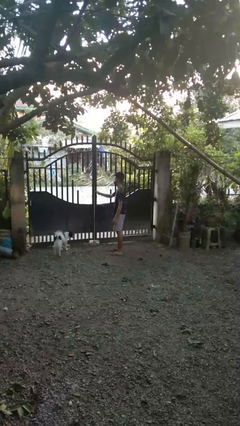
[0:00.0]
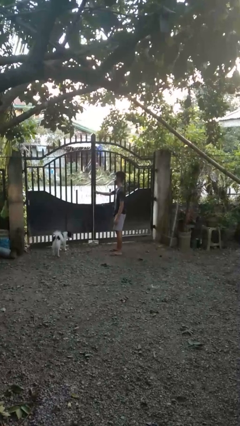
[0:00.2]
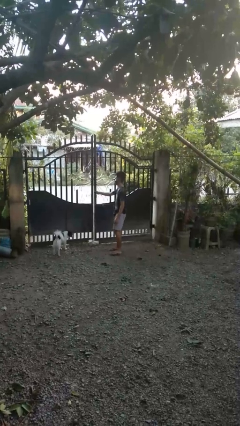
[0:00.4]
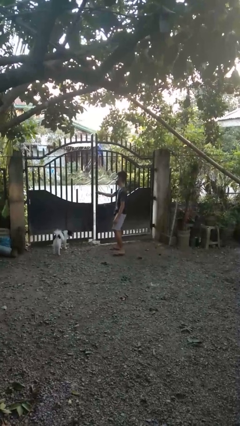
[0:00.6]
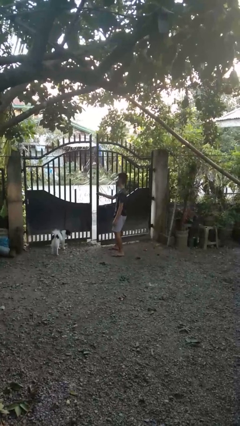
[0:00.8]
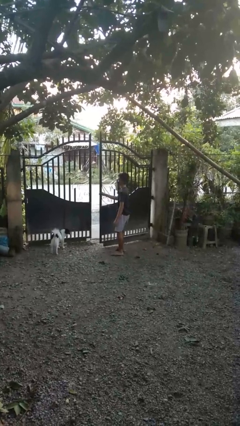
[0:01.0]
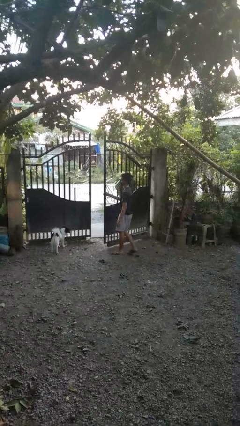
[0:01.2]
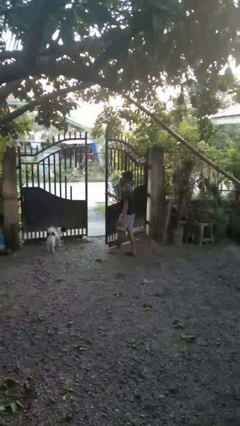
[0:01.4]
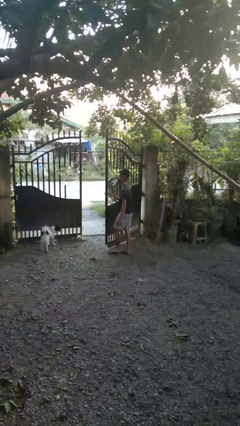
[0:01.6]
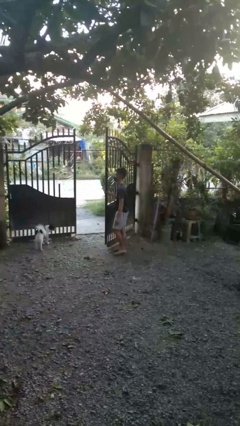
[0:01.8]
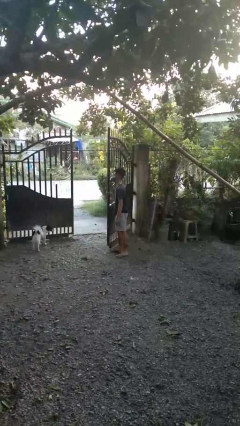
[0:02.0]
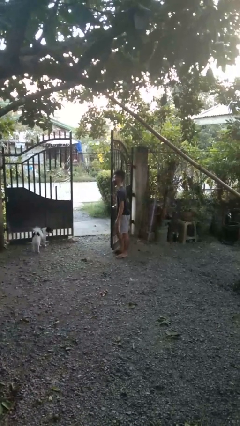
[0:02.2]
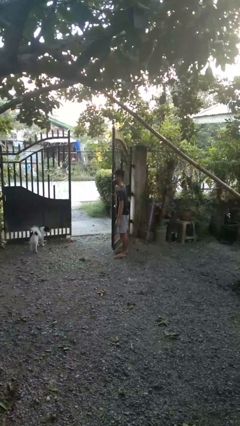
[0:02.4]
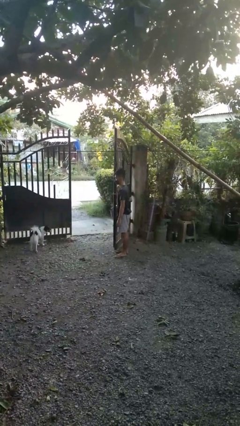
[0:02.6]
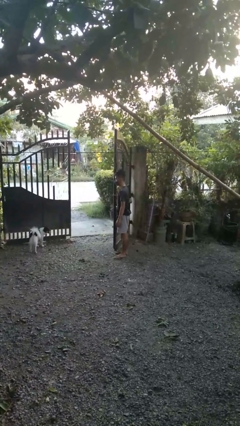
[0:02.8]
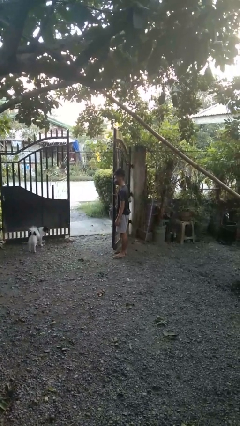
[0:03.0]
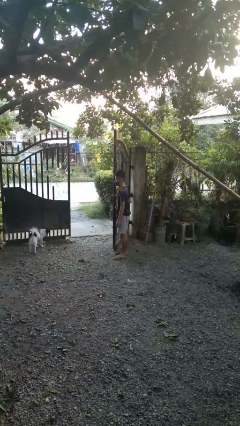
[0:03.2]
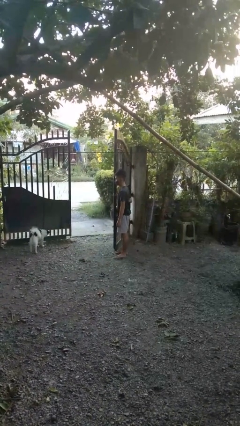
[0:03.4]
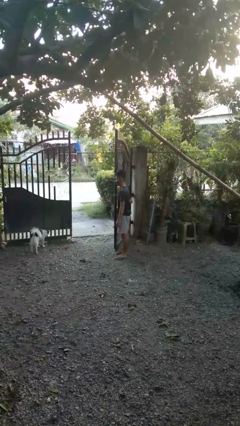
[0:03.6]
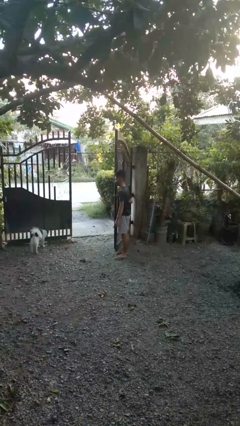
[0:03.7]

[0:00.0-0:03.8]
person opens gate

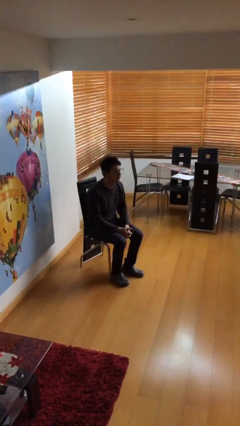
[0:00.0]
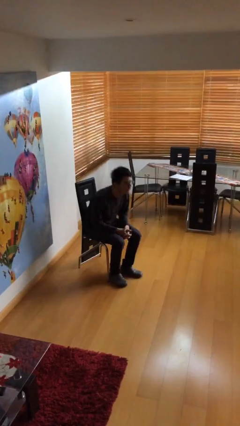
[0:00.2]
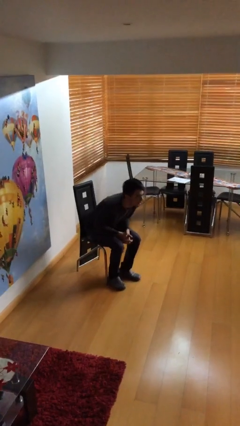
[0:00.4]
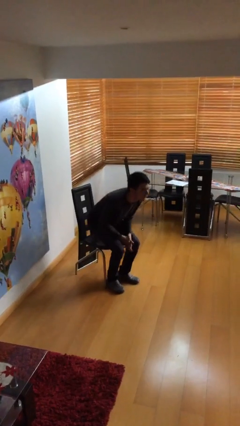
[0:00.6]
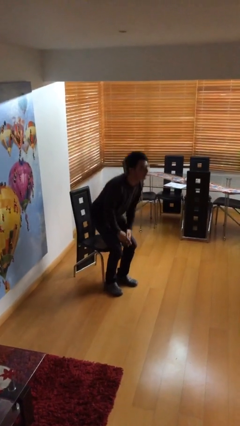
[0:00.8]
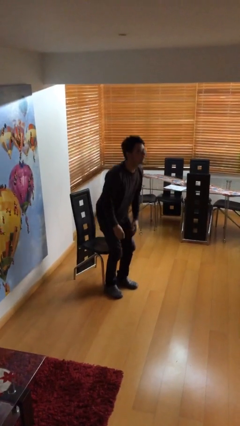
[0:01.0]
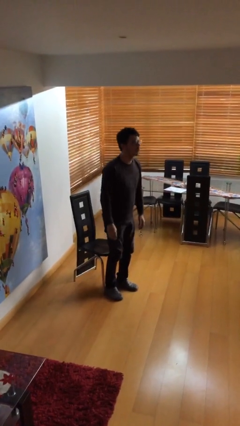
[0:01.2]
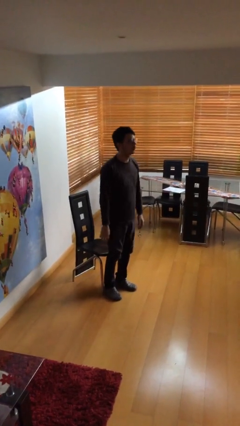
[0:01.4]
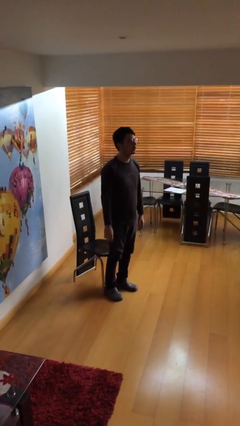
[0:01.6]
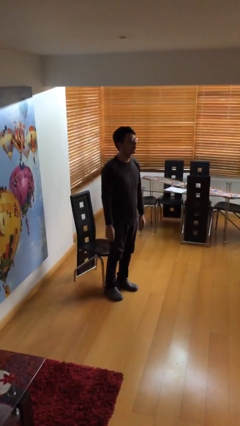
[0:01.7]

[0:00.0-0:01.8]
person stands up

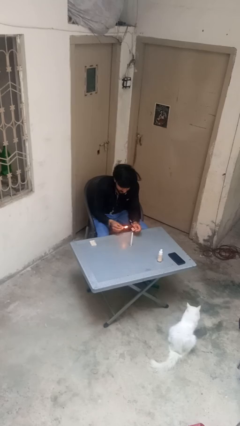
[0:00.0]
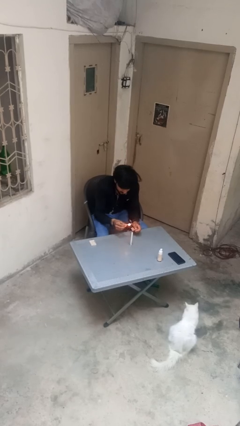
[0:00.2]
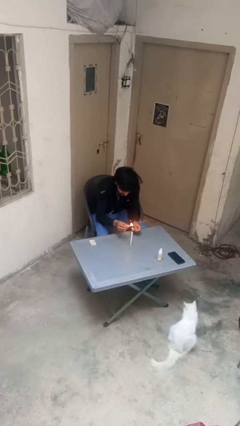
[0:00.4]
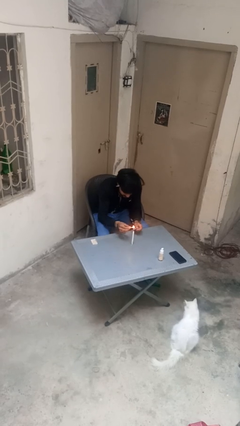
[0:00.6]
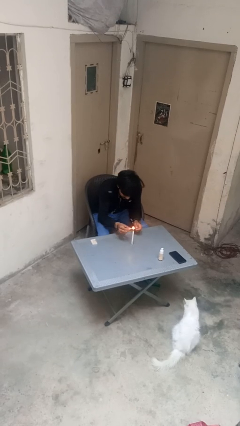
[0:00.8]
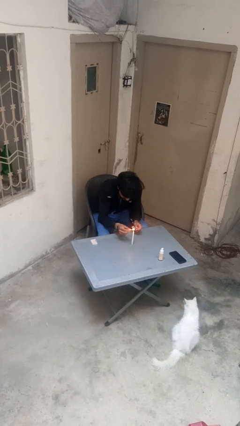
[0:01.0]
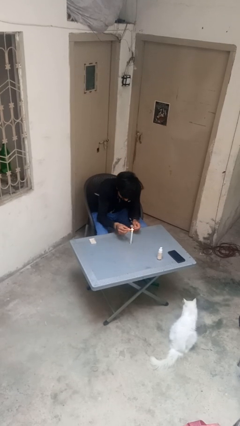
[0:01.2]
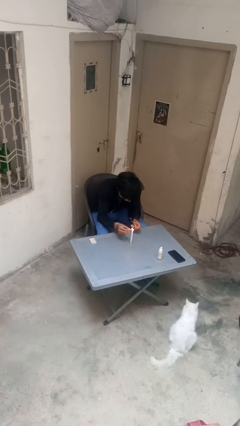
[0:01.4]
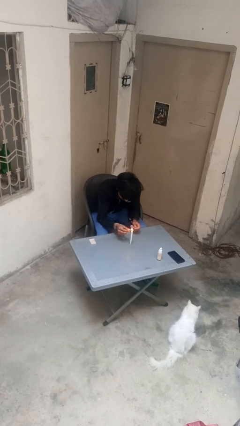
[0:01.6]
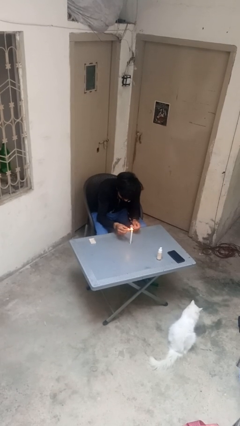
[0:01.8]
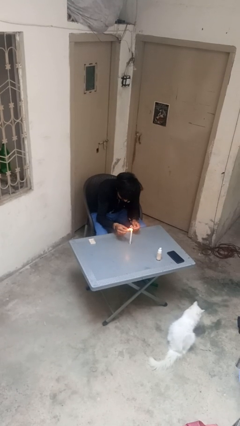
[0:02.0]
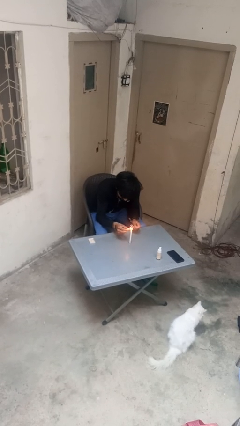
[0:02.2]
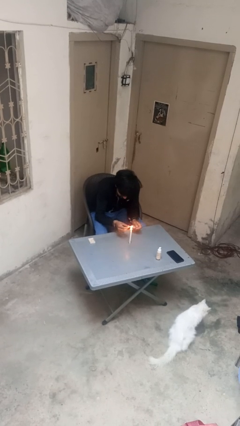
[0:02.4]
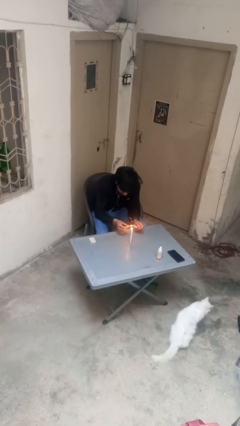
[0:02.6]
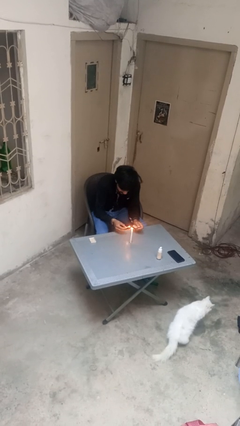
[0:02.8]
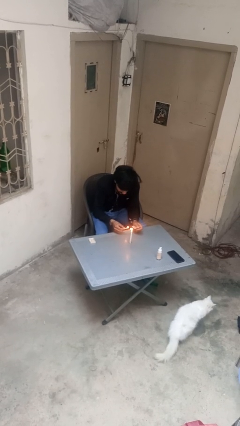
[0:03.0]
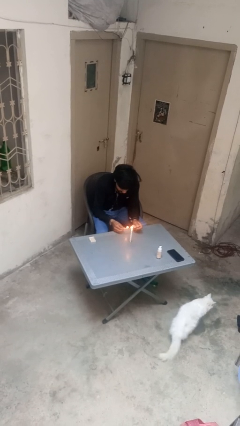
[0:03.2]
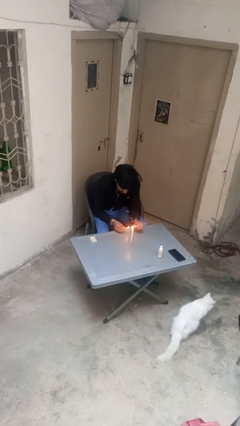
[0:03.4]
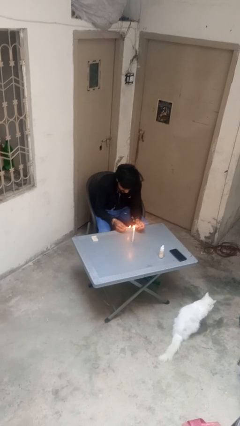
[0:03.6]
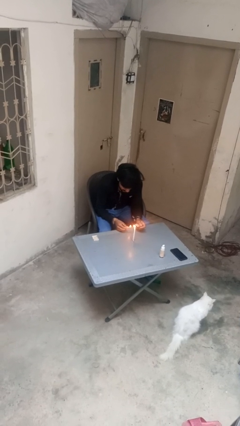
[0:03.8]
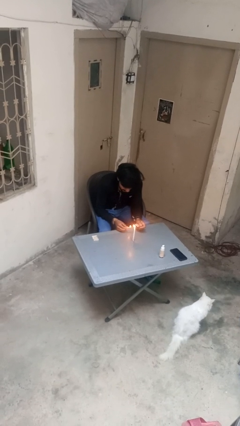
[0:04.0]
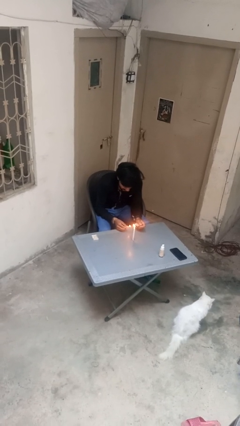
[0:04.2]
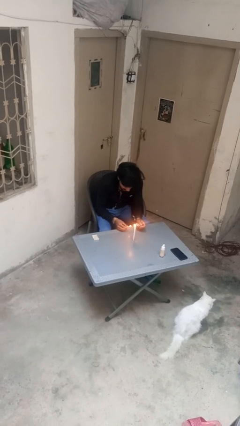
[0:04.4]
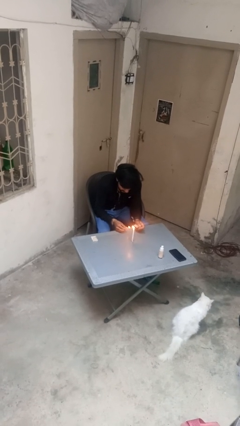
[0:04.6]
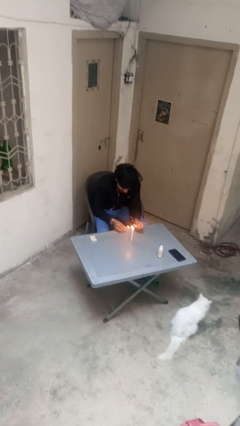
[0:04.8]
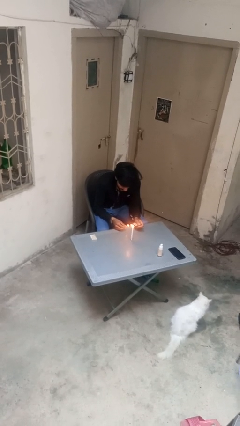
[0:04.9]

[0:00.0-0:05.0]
person lights candle

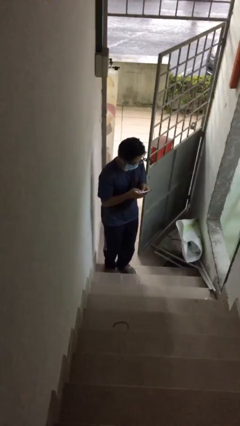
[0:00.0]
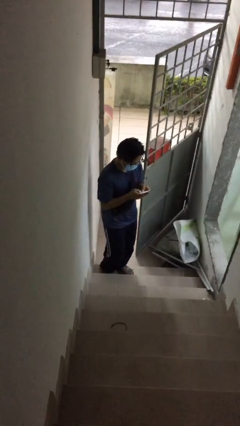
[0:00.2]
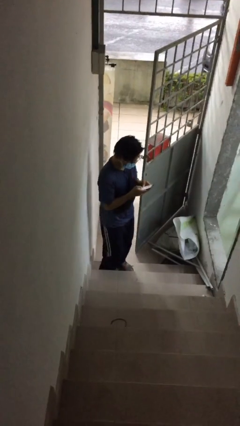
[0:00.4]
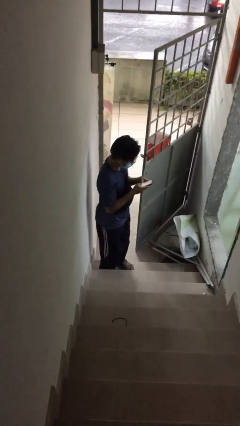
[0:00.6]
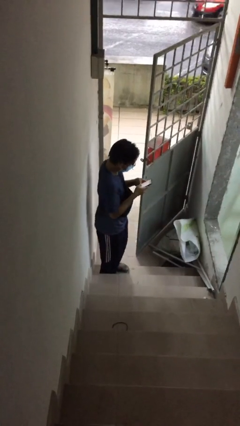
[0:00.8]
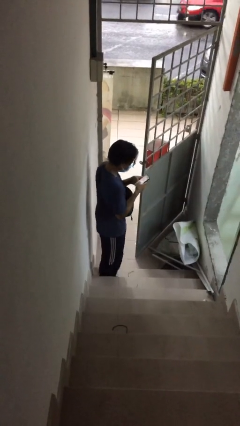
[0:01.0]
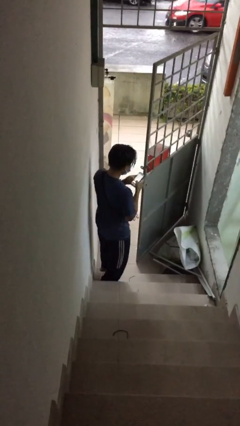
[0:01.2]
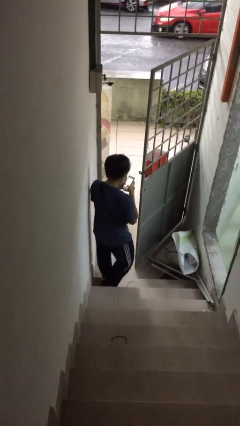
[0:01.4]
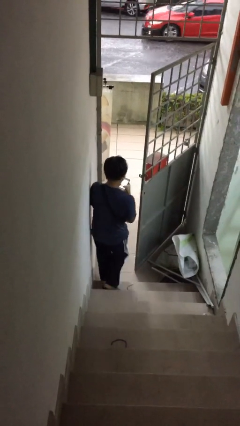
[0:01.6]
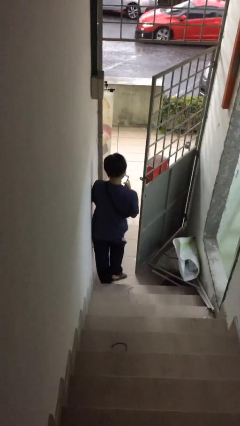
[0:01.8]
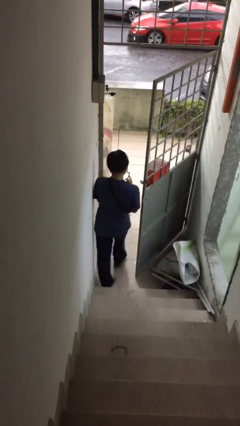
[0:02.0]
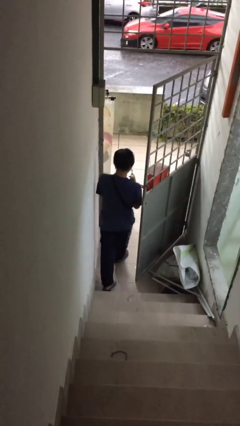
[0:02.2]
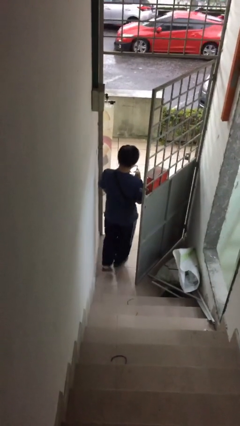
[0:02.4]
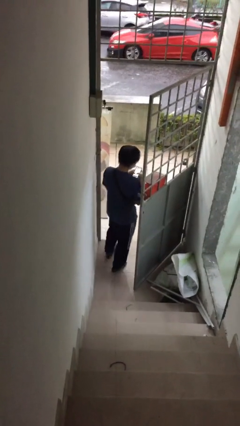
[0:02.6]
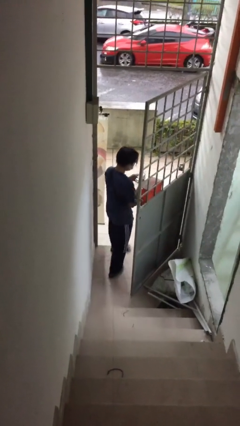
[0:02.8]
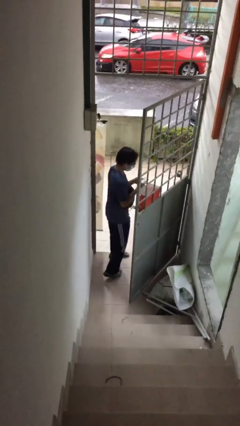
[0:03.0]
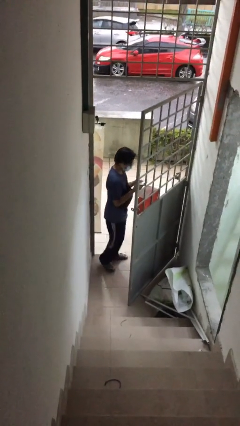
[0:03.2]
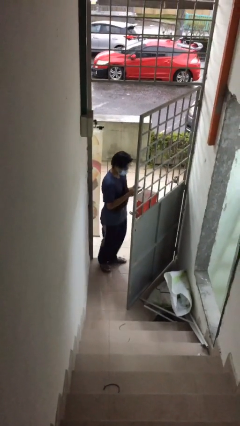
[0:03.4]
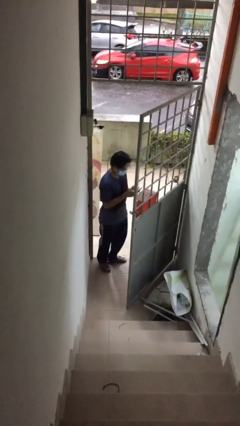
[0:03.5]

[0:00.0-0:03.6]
person exits scene through structure

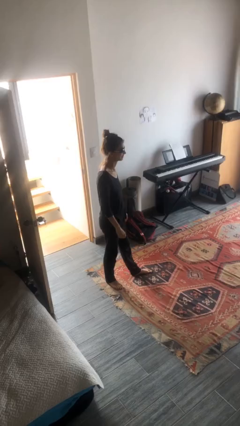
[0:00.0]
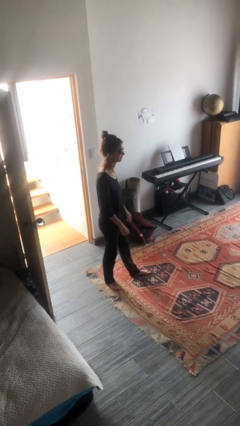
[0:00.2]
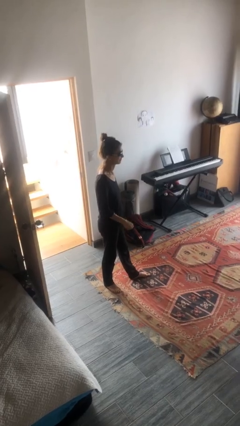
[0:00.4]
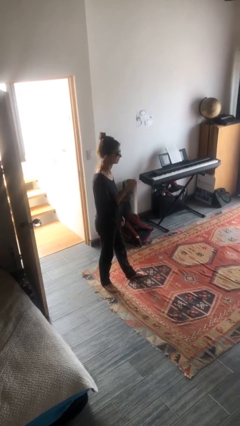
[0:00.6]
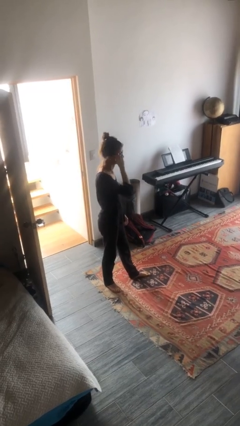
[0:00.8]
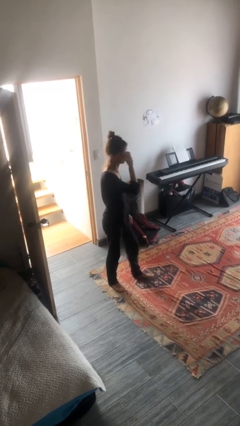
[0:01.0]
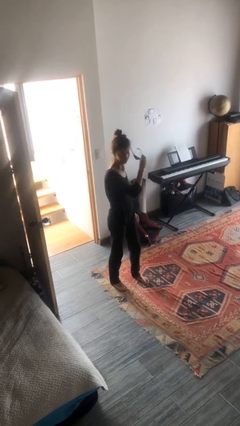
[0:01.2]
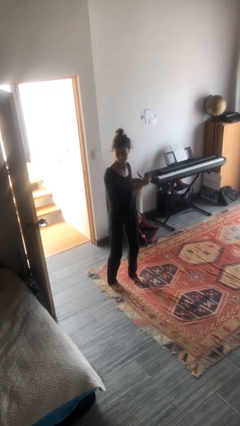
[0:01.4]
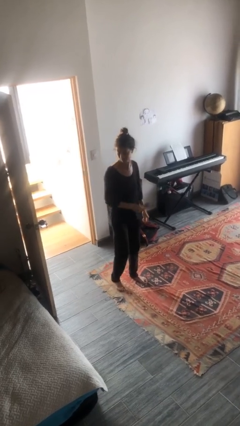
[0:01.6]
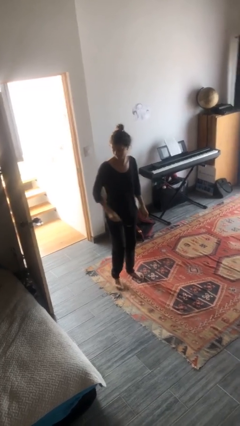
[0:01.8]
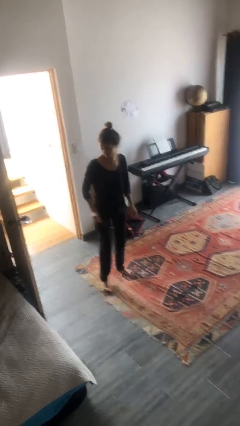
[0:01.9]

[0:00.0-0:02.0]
person takes off sunglasses

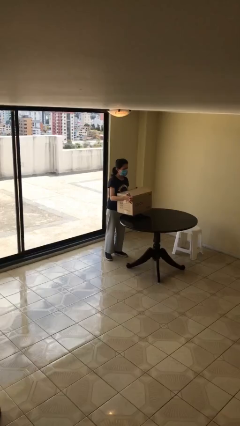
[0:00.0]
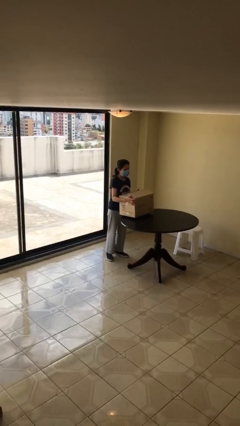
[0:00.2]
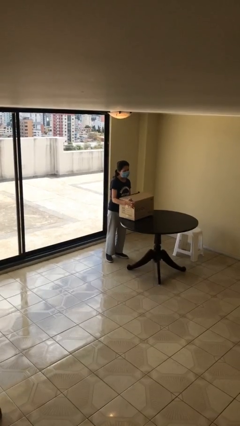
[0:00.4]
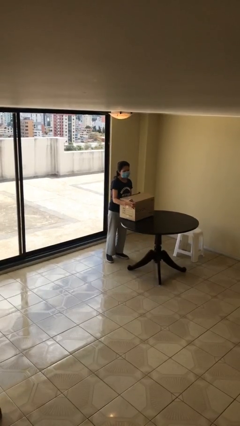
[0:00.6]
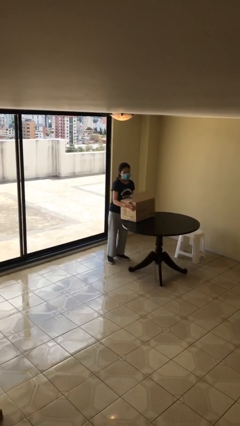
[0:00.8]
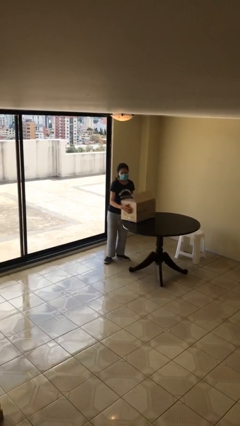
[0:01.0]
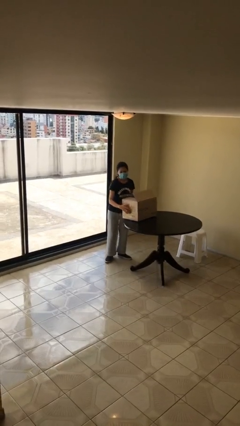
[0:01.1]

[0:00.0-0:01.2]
person puts down object on table

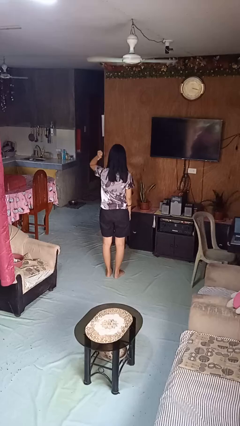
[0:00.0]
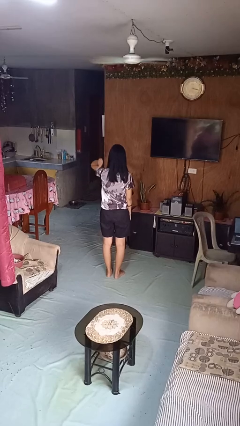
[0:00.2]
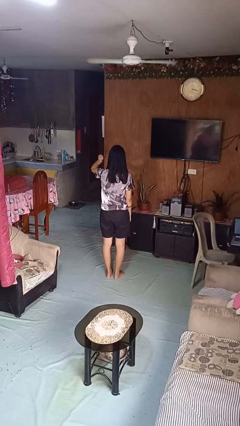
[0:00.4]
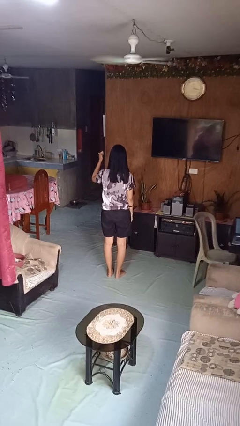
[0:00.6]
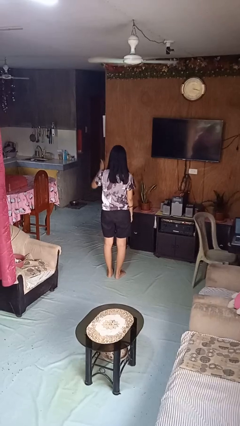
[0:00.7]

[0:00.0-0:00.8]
person gestures behind me
